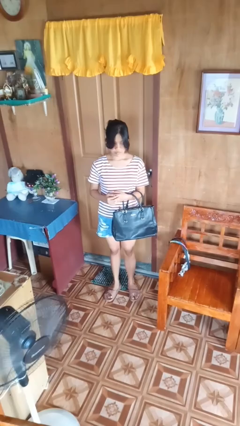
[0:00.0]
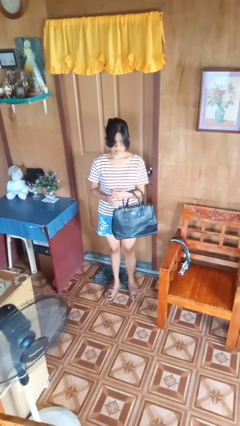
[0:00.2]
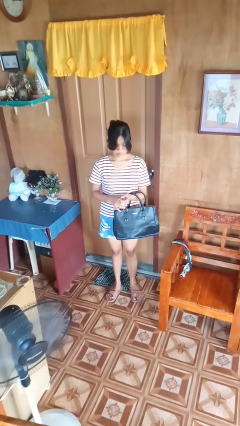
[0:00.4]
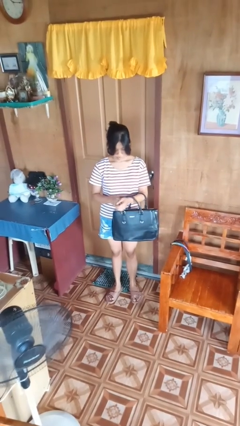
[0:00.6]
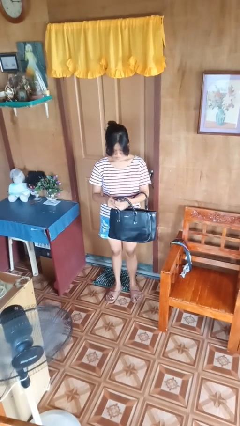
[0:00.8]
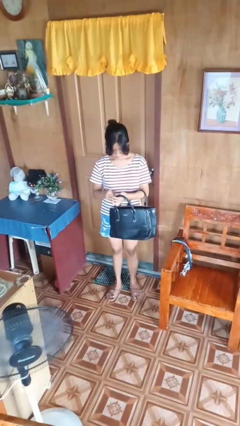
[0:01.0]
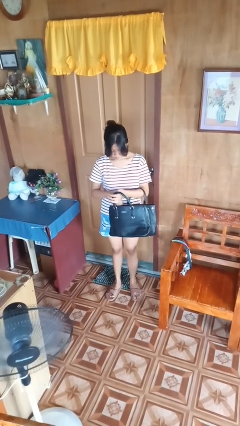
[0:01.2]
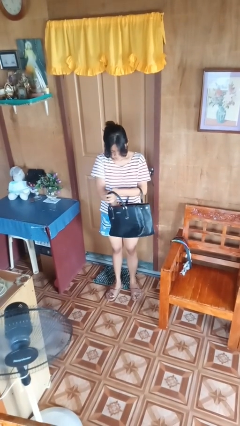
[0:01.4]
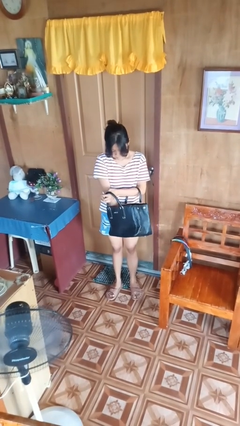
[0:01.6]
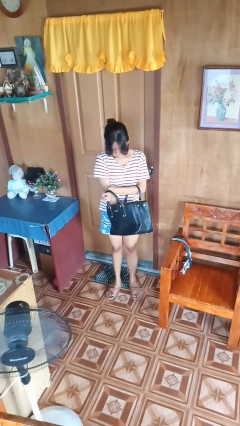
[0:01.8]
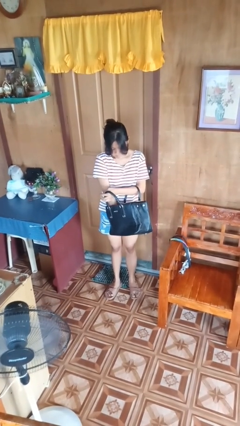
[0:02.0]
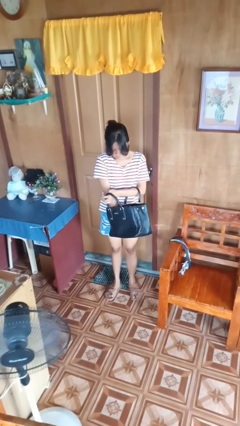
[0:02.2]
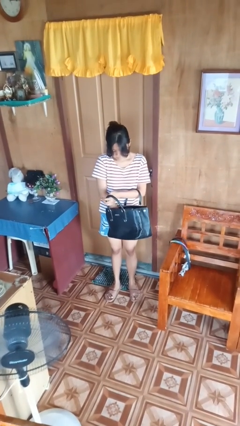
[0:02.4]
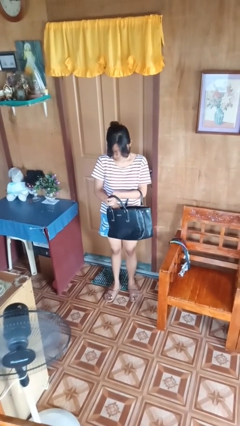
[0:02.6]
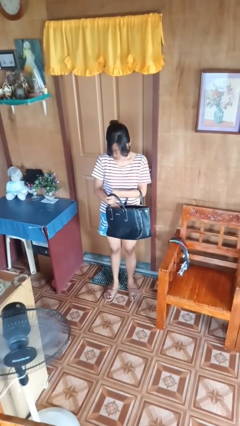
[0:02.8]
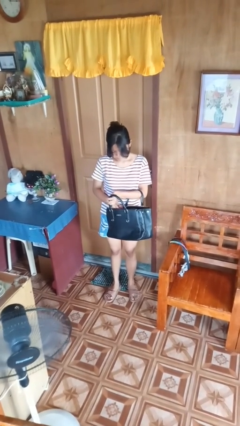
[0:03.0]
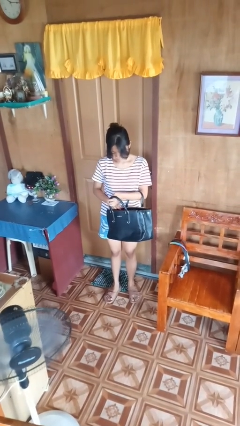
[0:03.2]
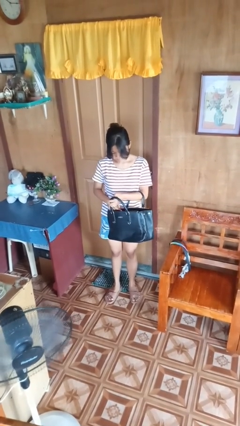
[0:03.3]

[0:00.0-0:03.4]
person searches in purse

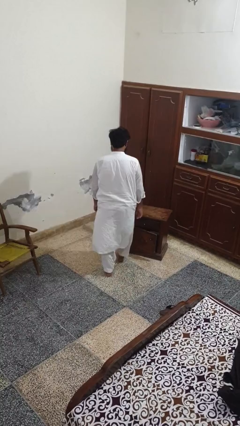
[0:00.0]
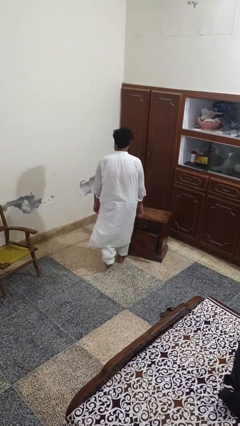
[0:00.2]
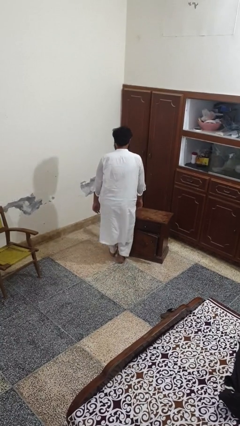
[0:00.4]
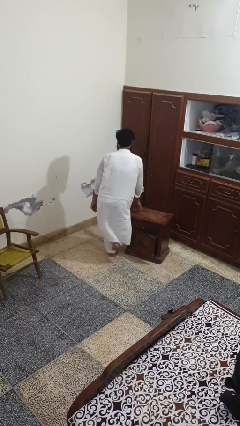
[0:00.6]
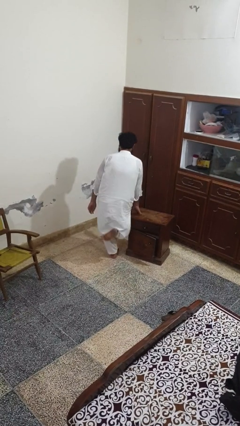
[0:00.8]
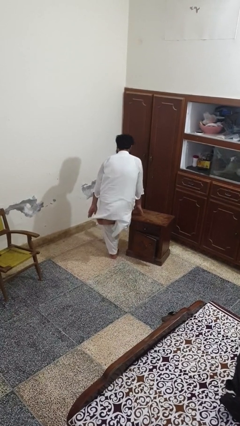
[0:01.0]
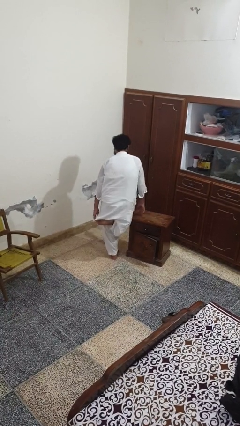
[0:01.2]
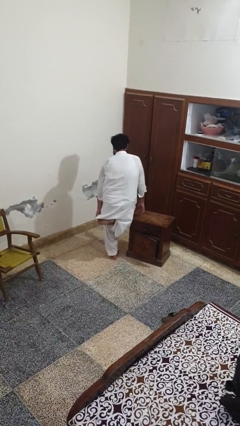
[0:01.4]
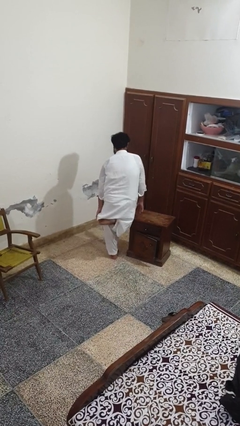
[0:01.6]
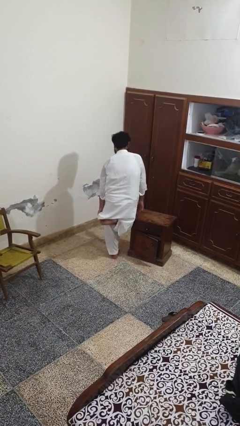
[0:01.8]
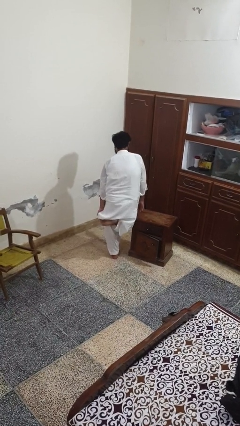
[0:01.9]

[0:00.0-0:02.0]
person stubs toe

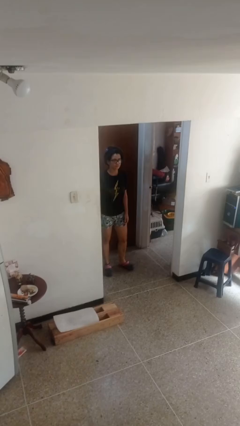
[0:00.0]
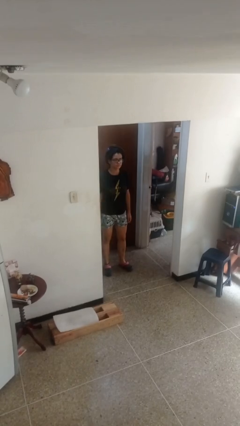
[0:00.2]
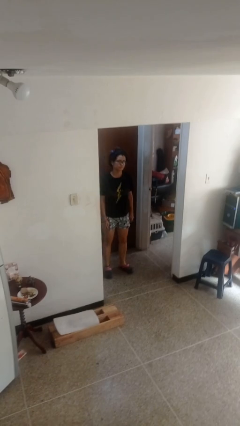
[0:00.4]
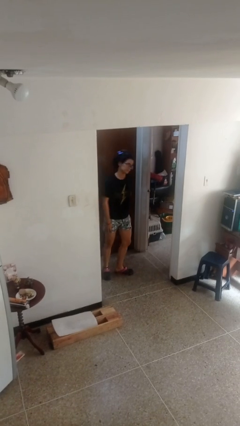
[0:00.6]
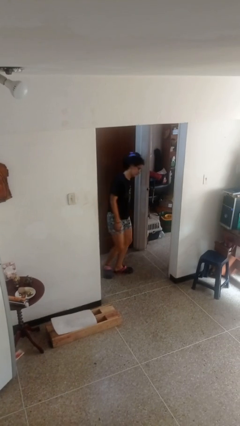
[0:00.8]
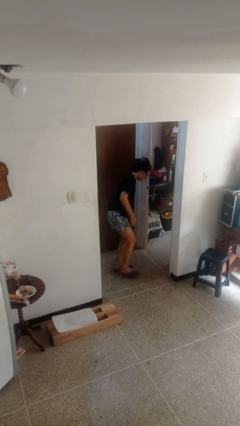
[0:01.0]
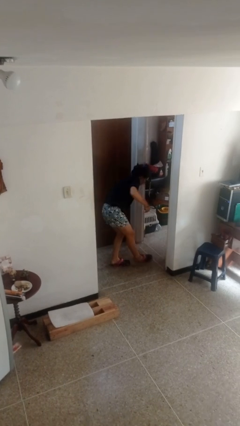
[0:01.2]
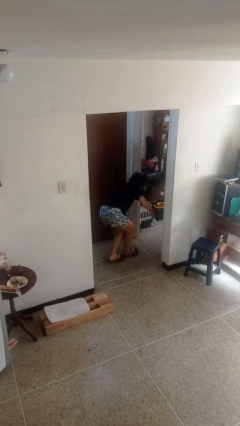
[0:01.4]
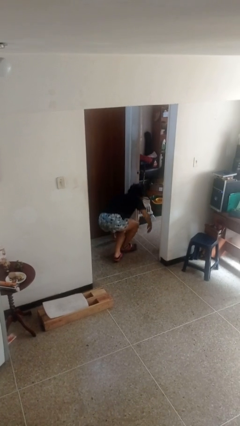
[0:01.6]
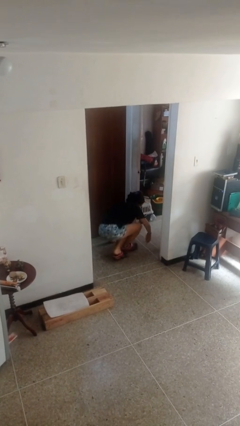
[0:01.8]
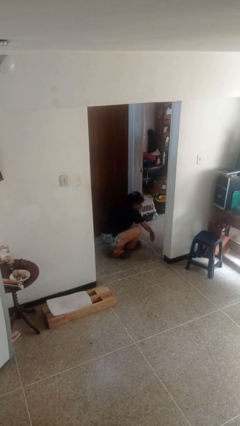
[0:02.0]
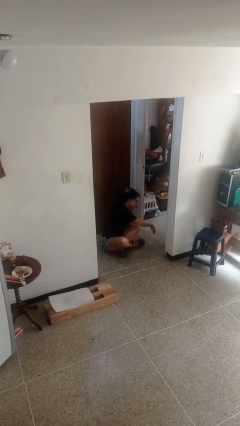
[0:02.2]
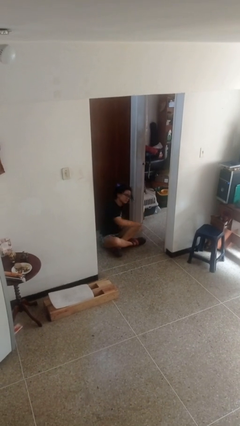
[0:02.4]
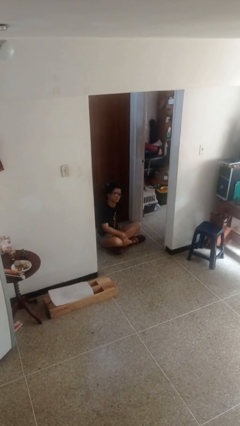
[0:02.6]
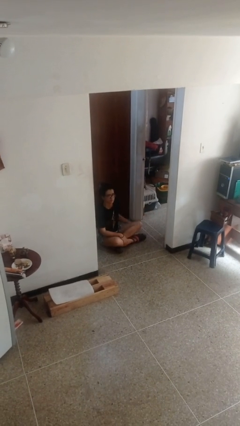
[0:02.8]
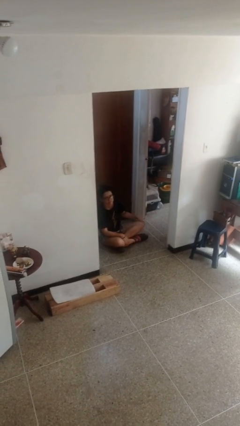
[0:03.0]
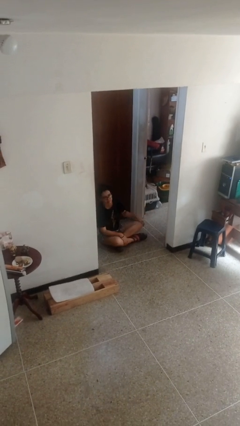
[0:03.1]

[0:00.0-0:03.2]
person sits crisscross

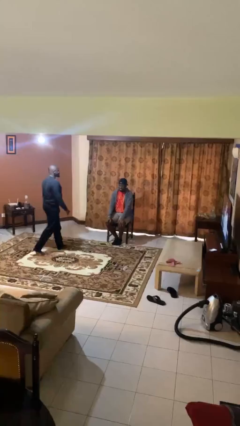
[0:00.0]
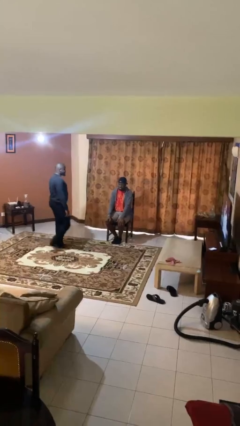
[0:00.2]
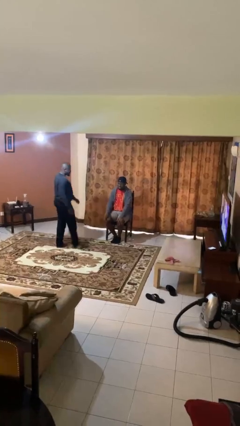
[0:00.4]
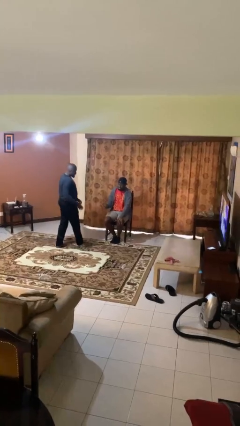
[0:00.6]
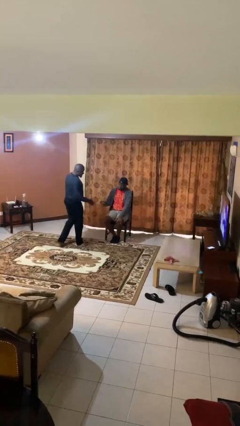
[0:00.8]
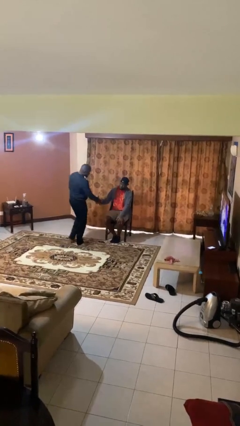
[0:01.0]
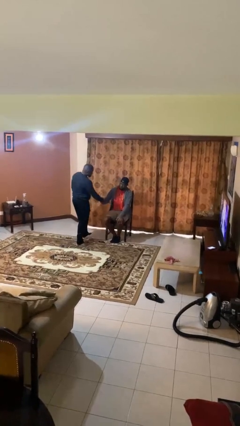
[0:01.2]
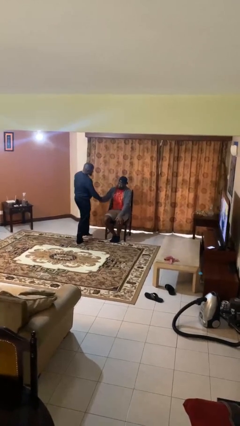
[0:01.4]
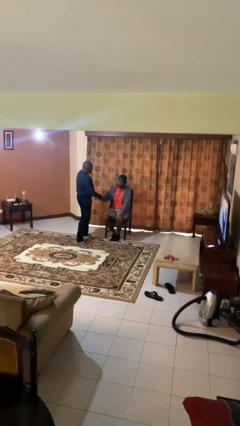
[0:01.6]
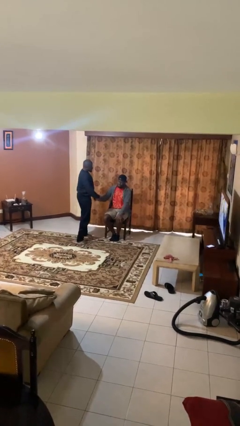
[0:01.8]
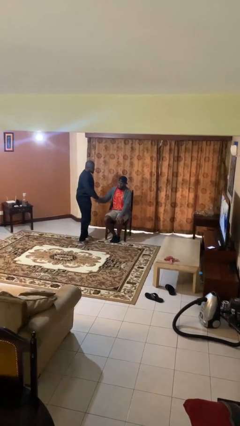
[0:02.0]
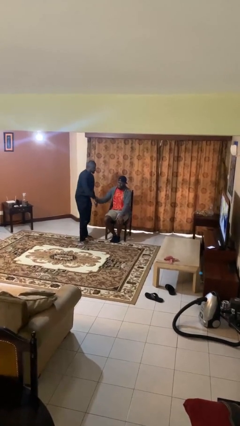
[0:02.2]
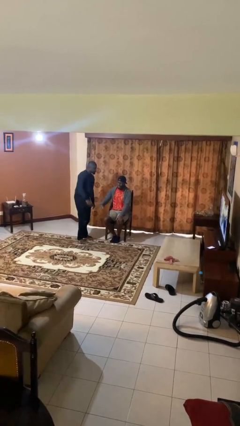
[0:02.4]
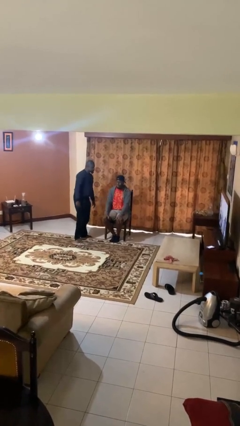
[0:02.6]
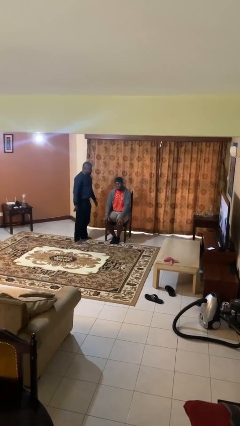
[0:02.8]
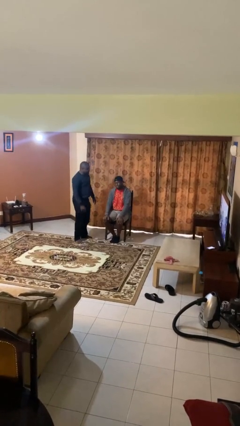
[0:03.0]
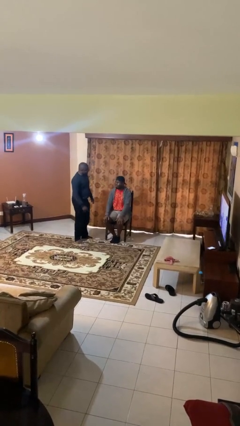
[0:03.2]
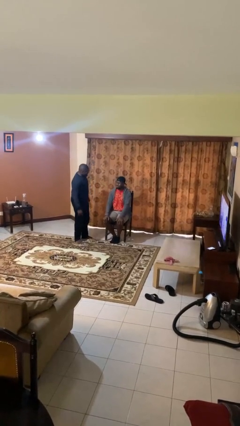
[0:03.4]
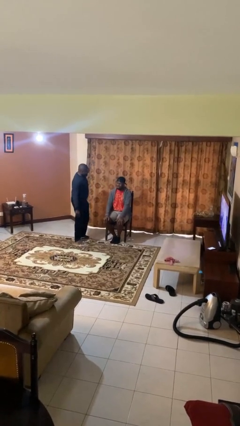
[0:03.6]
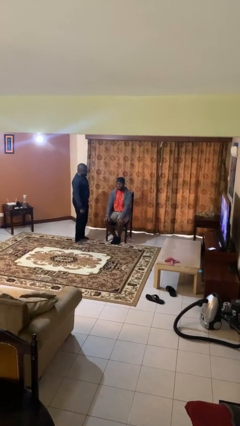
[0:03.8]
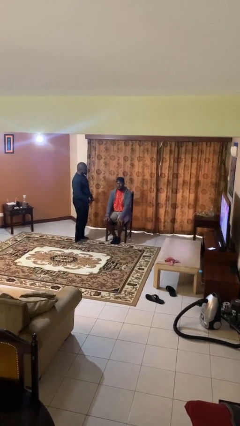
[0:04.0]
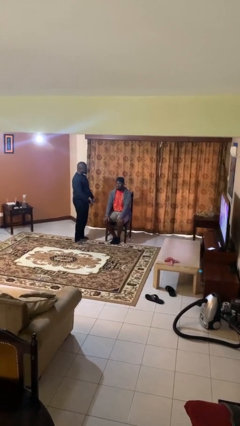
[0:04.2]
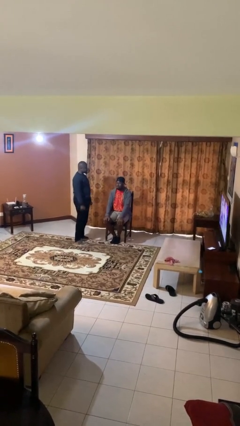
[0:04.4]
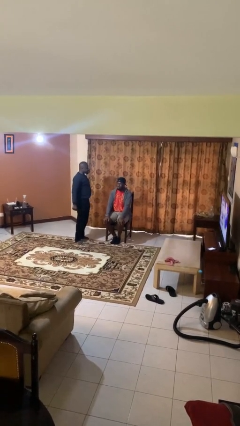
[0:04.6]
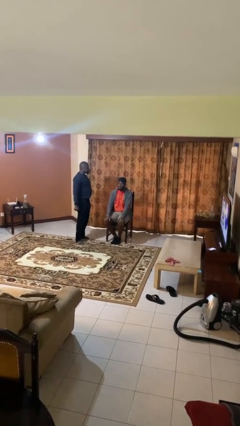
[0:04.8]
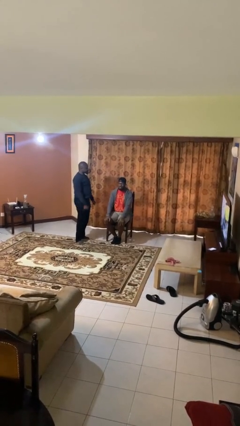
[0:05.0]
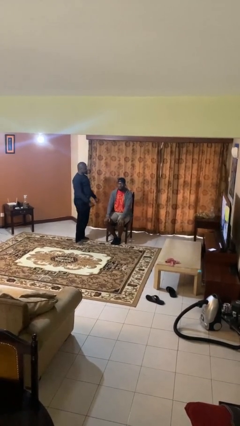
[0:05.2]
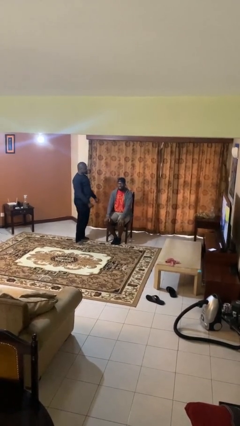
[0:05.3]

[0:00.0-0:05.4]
person shakes hand

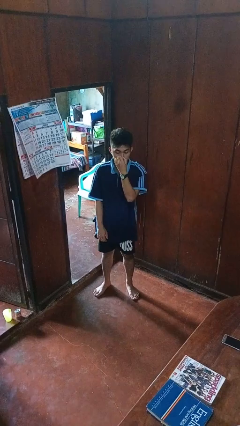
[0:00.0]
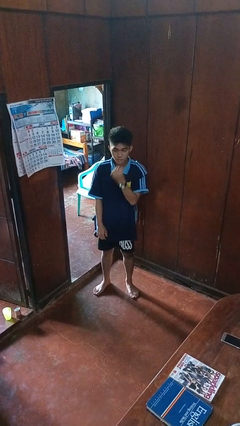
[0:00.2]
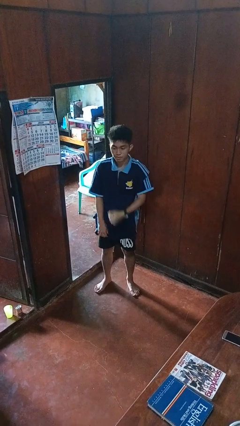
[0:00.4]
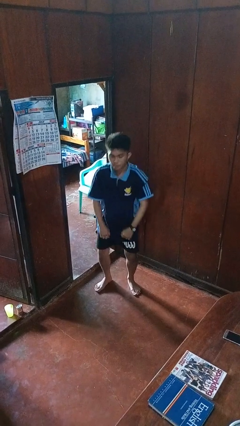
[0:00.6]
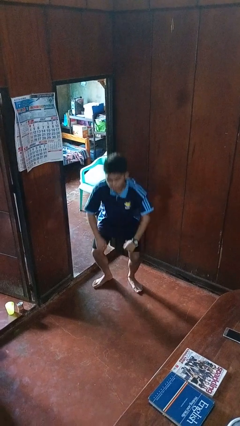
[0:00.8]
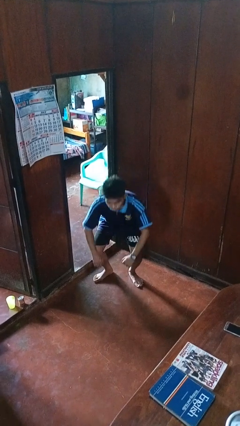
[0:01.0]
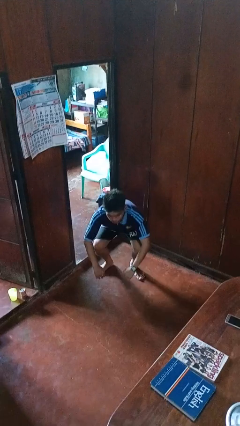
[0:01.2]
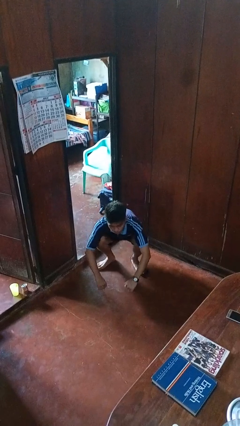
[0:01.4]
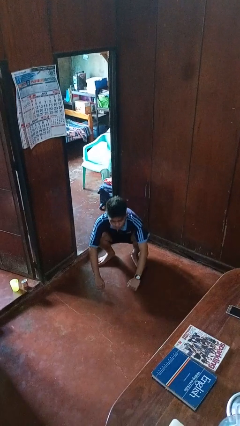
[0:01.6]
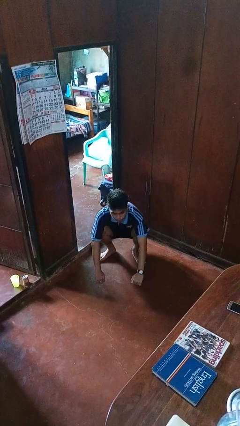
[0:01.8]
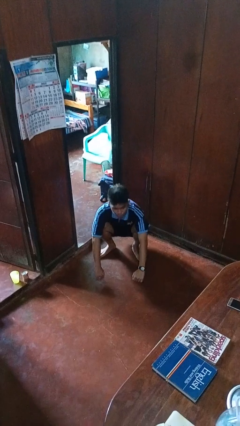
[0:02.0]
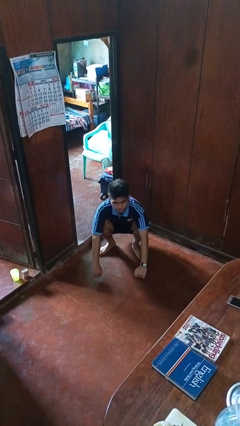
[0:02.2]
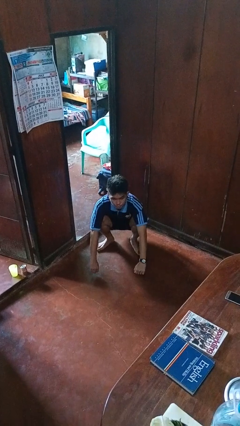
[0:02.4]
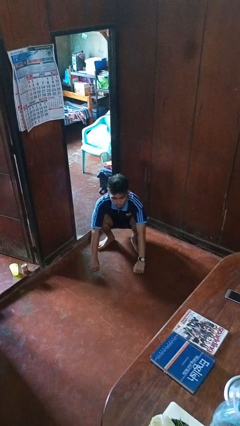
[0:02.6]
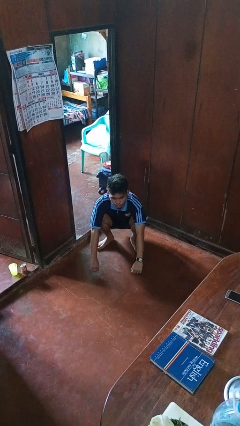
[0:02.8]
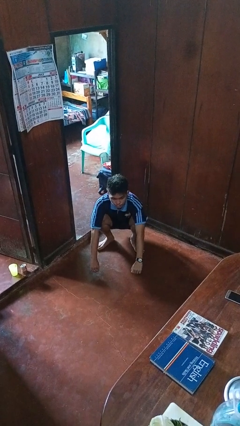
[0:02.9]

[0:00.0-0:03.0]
person squats

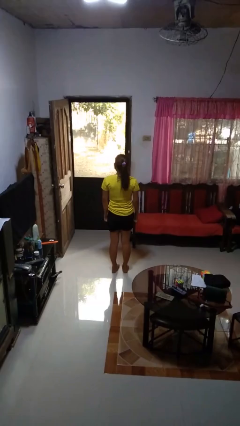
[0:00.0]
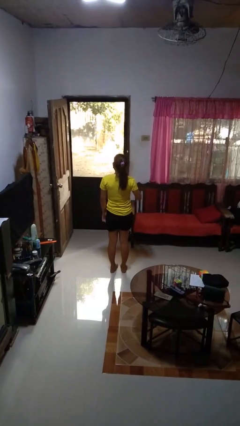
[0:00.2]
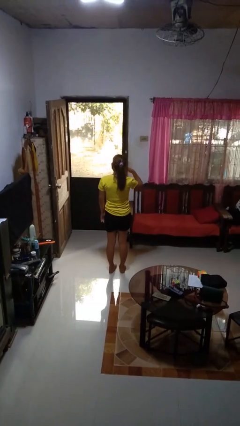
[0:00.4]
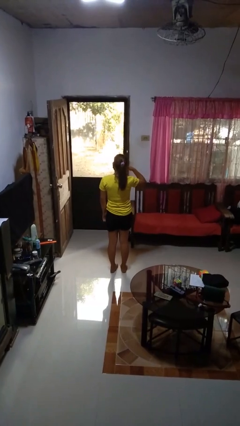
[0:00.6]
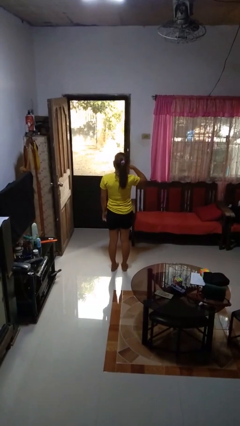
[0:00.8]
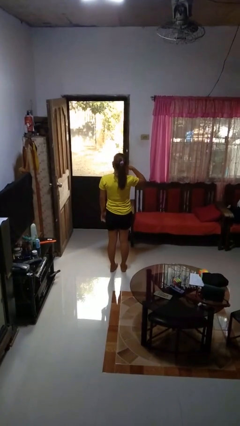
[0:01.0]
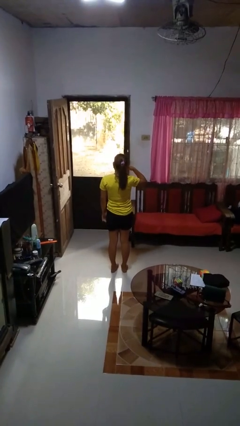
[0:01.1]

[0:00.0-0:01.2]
person gestures call me
